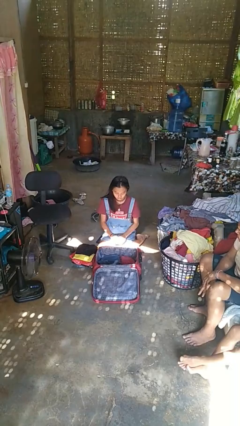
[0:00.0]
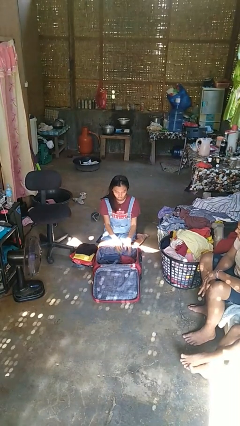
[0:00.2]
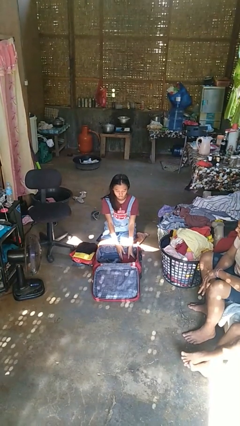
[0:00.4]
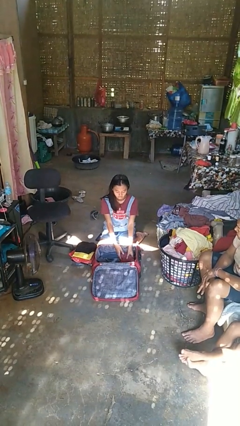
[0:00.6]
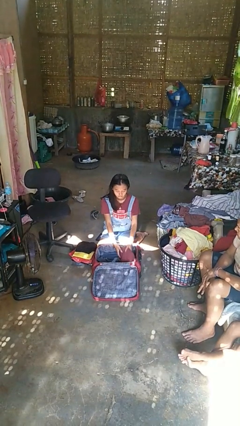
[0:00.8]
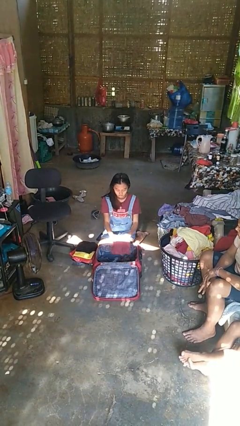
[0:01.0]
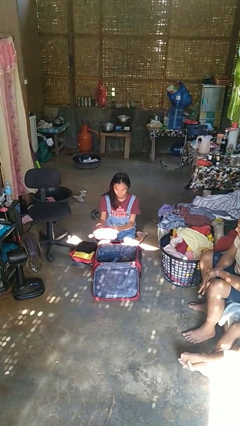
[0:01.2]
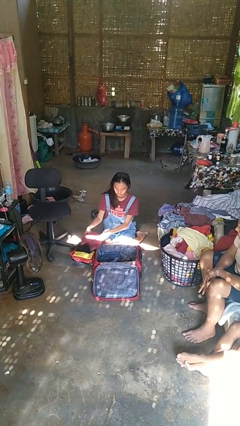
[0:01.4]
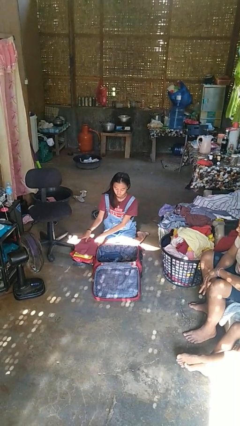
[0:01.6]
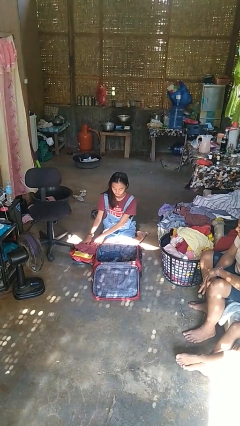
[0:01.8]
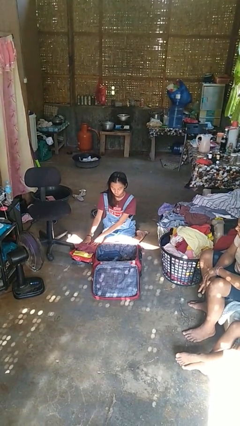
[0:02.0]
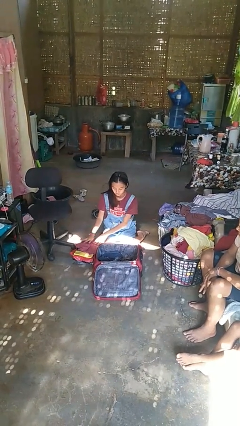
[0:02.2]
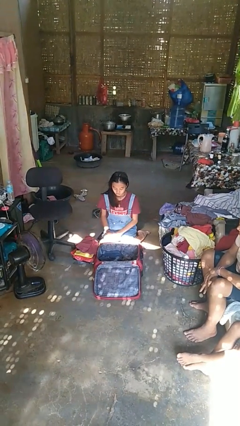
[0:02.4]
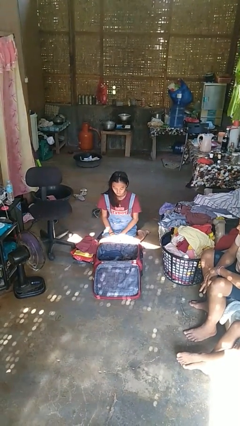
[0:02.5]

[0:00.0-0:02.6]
person unloads clothes from suitcase

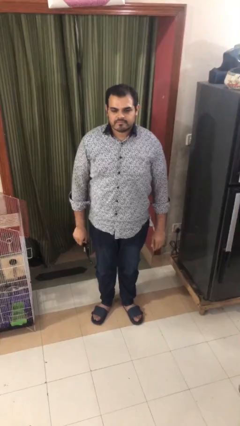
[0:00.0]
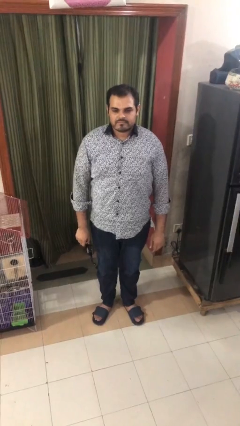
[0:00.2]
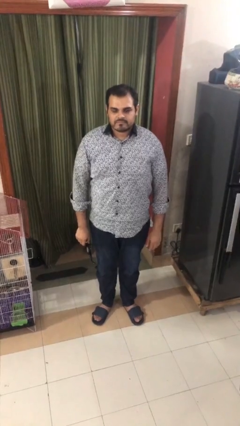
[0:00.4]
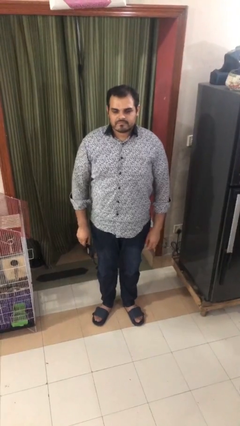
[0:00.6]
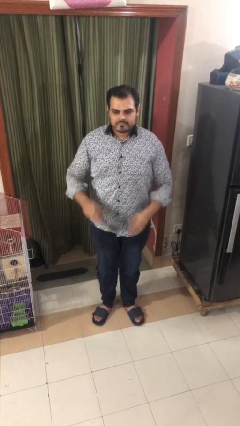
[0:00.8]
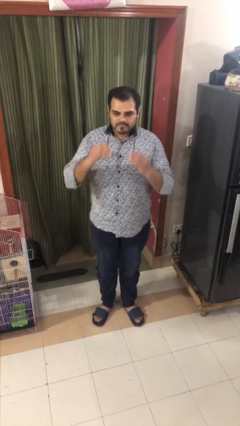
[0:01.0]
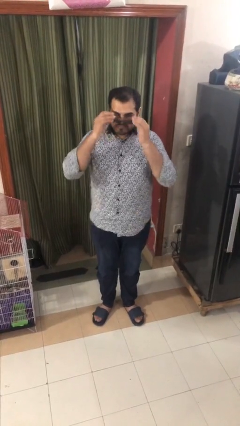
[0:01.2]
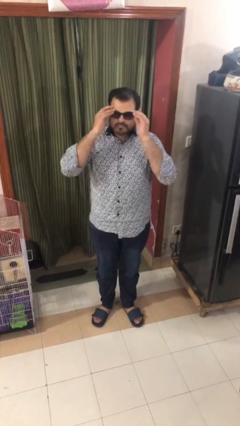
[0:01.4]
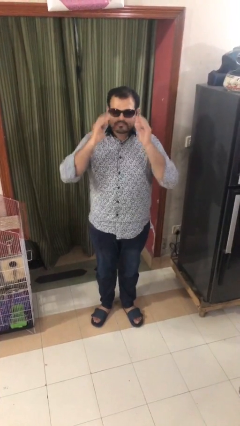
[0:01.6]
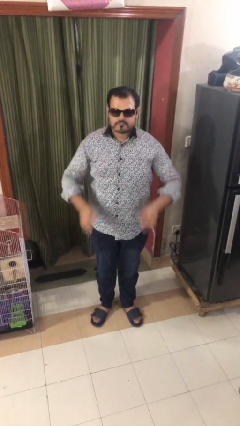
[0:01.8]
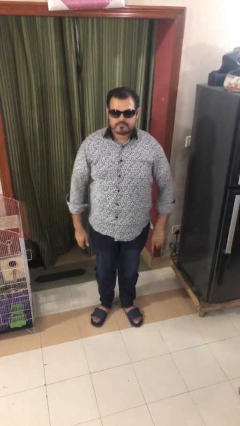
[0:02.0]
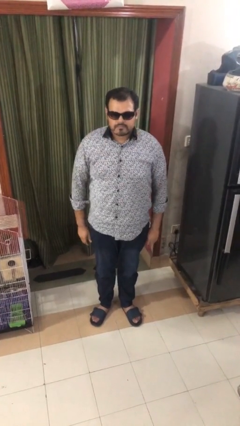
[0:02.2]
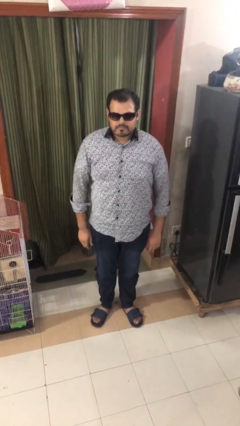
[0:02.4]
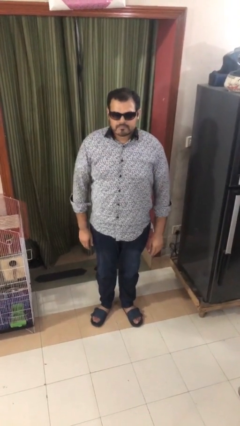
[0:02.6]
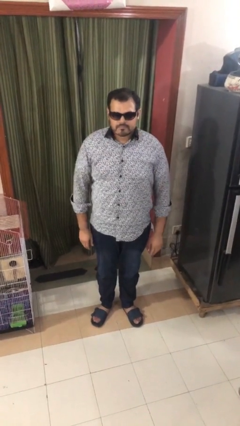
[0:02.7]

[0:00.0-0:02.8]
person puts on sunglasses

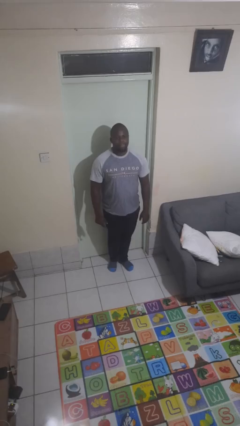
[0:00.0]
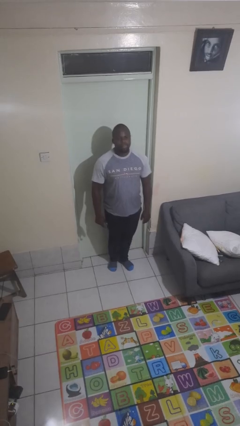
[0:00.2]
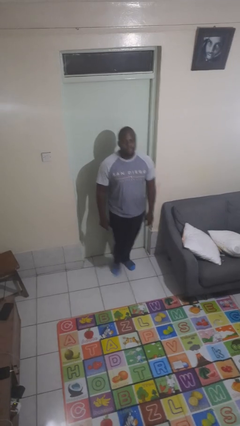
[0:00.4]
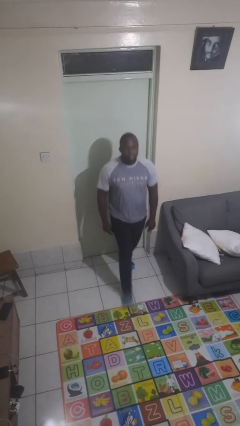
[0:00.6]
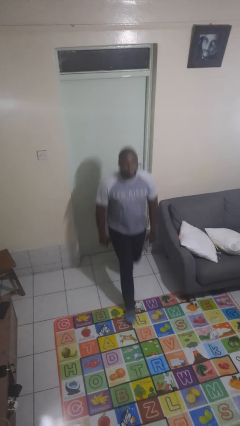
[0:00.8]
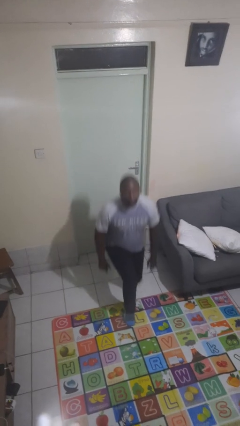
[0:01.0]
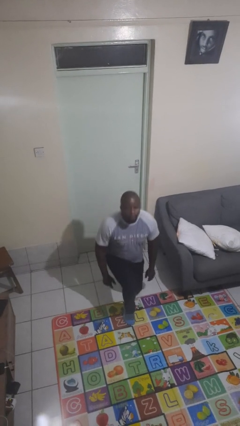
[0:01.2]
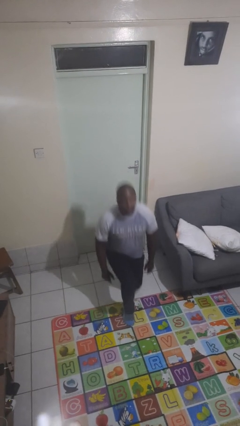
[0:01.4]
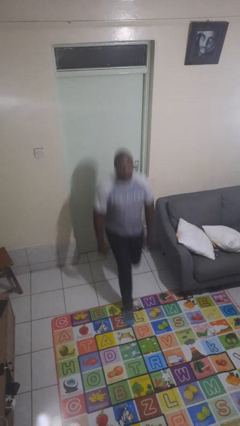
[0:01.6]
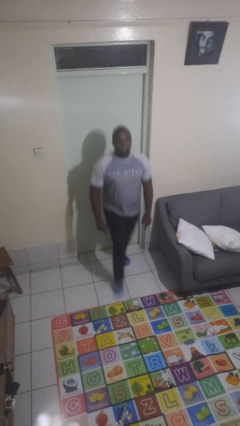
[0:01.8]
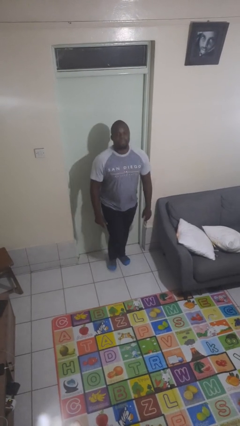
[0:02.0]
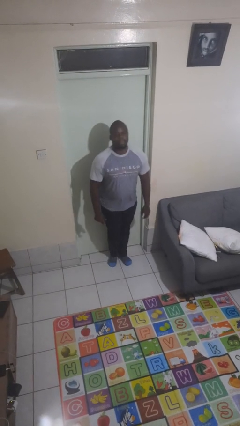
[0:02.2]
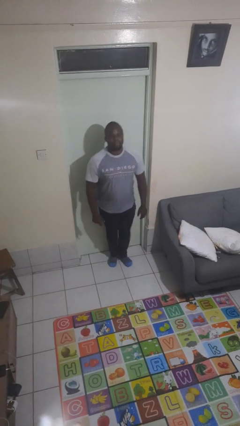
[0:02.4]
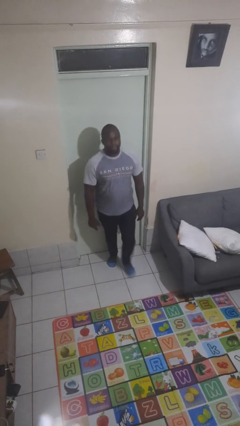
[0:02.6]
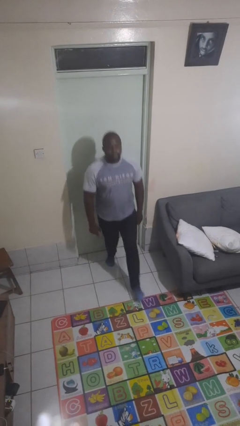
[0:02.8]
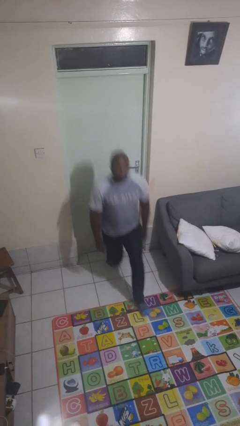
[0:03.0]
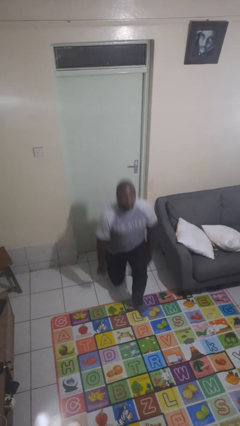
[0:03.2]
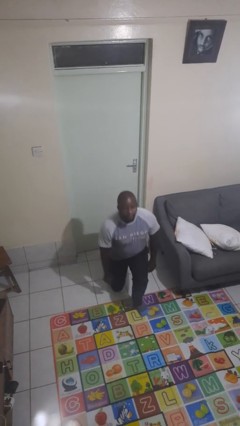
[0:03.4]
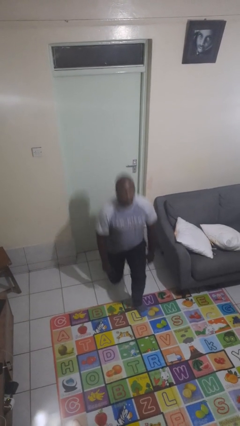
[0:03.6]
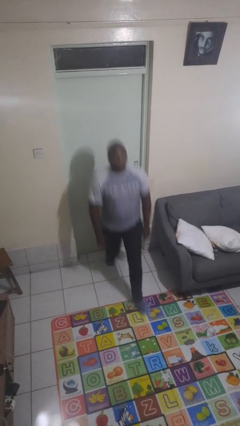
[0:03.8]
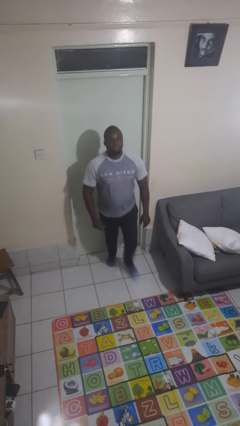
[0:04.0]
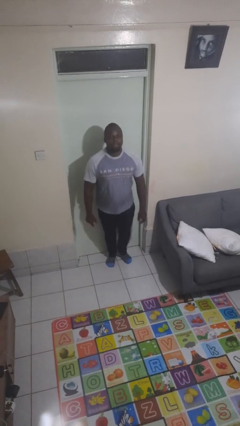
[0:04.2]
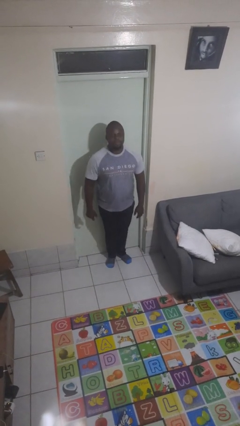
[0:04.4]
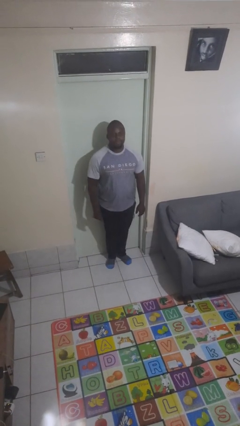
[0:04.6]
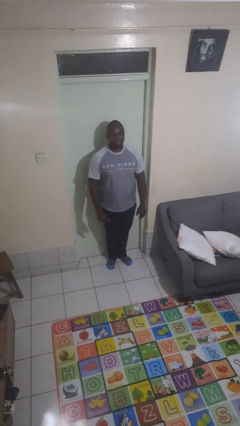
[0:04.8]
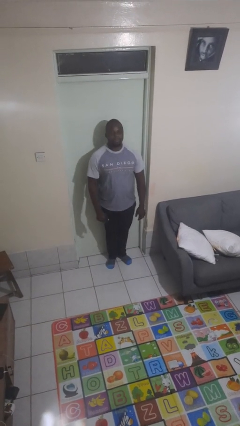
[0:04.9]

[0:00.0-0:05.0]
person exercises with lunges

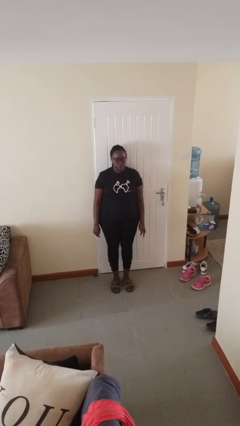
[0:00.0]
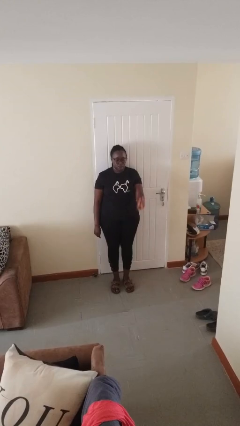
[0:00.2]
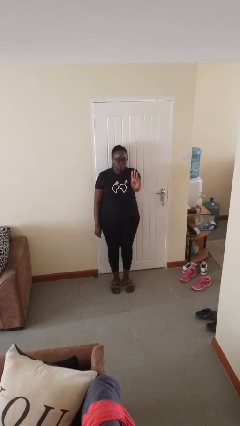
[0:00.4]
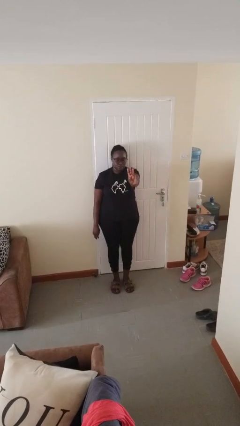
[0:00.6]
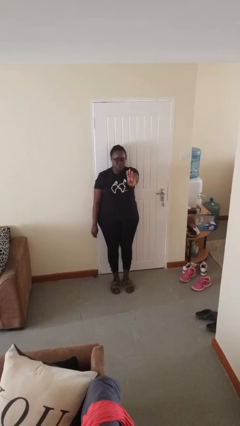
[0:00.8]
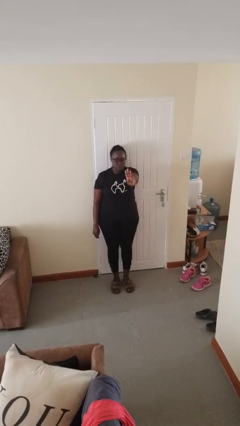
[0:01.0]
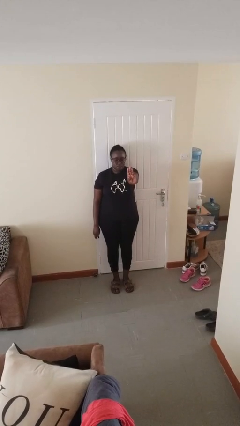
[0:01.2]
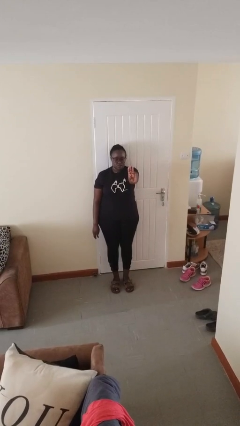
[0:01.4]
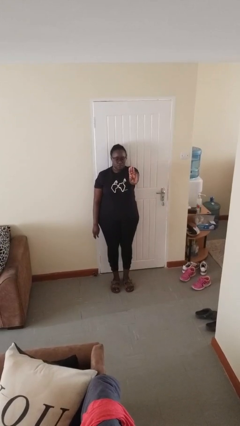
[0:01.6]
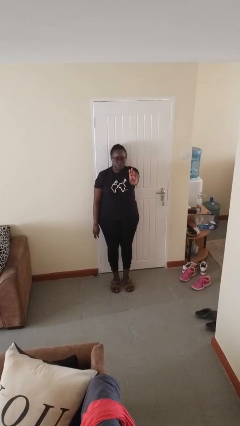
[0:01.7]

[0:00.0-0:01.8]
person gestures number three

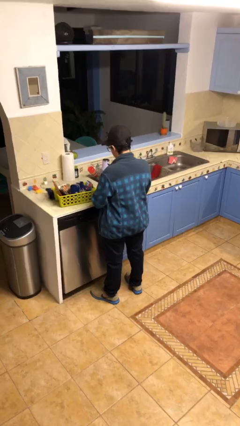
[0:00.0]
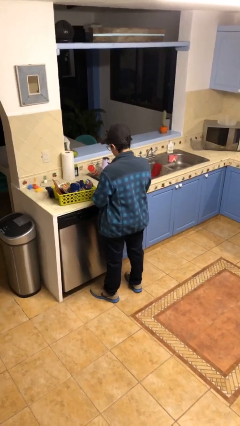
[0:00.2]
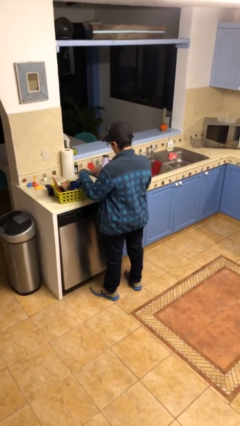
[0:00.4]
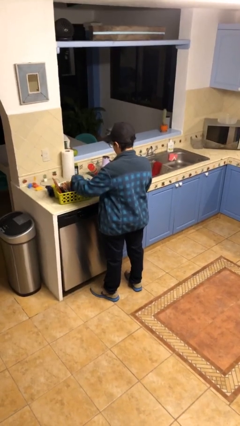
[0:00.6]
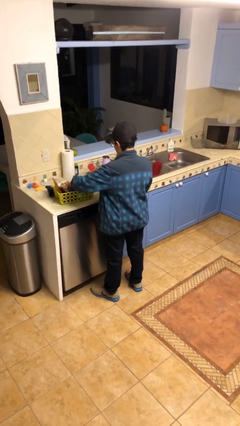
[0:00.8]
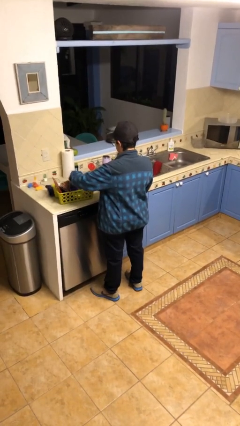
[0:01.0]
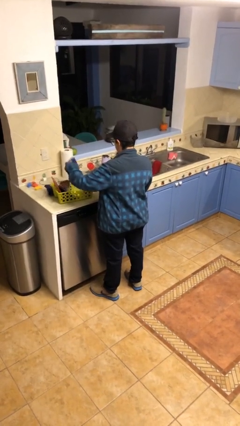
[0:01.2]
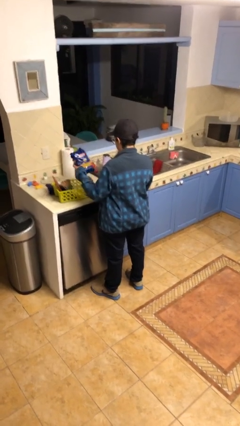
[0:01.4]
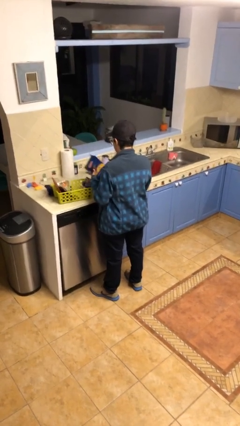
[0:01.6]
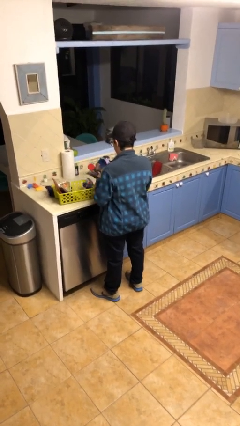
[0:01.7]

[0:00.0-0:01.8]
person takes object from basket

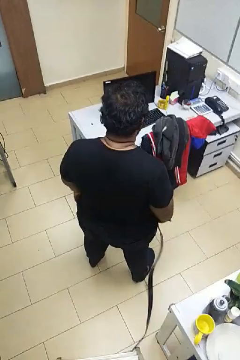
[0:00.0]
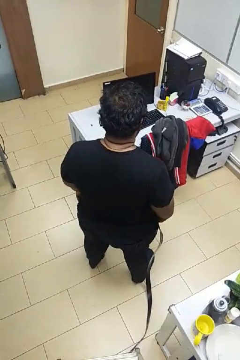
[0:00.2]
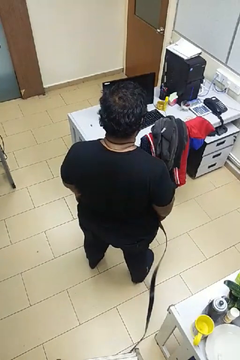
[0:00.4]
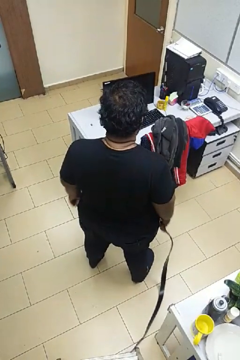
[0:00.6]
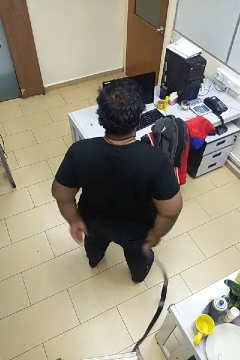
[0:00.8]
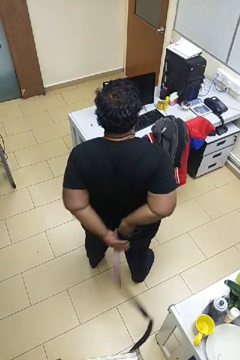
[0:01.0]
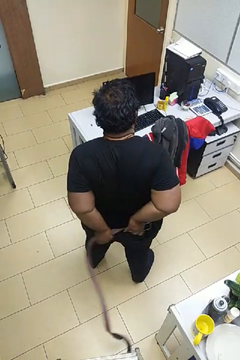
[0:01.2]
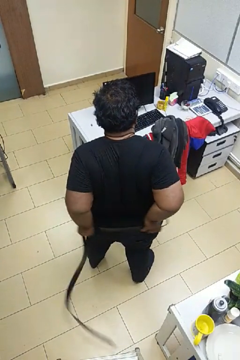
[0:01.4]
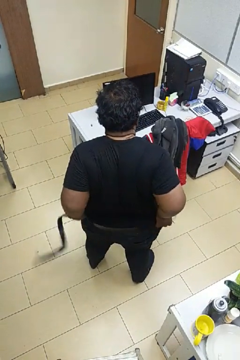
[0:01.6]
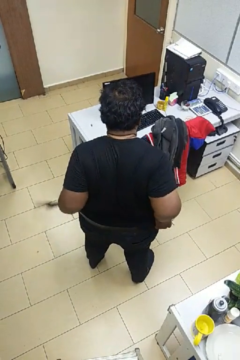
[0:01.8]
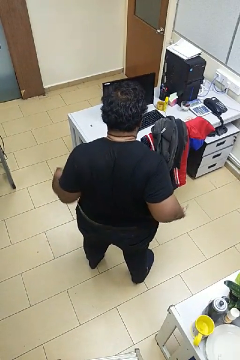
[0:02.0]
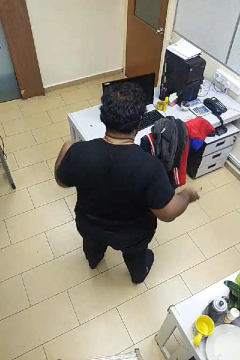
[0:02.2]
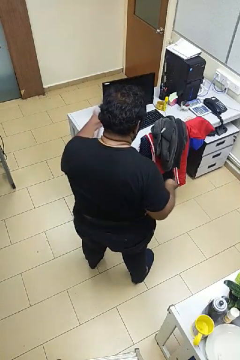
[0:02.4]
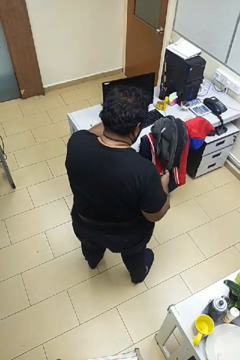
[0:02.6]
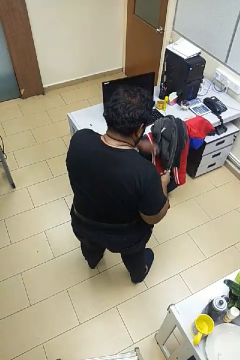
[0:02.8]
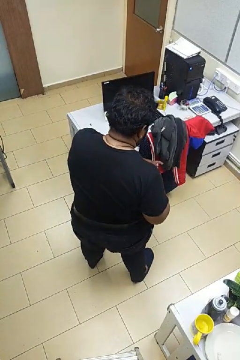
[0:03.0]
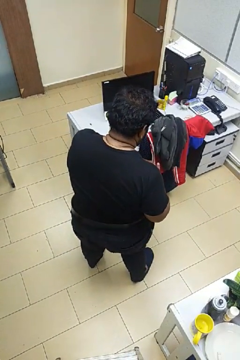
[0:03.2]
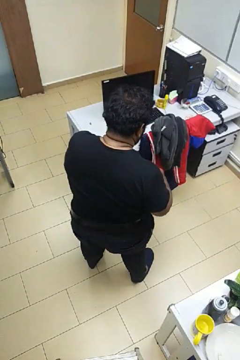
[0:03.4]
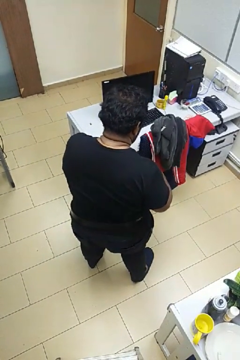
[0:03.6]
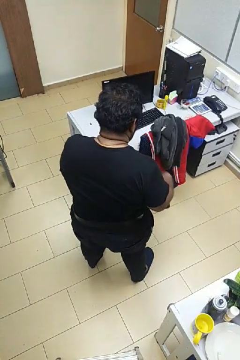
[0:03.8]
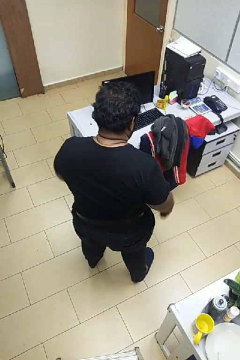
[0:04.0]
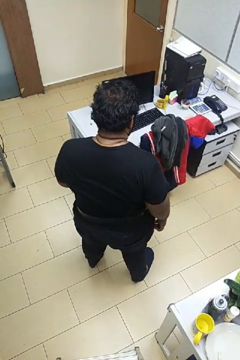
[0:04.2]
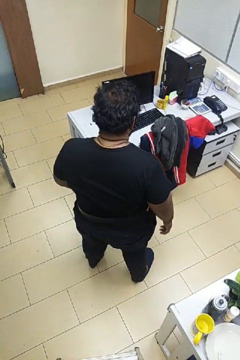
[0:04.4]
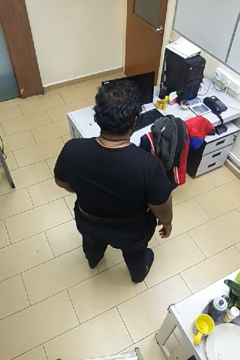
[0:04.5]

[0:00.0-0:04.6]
person puts on belt
